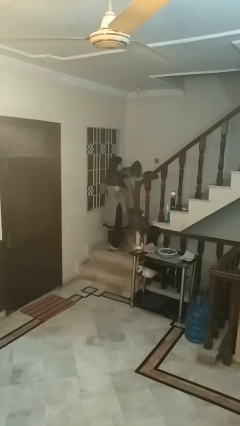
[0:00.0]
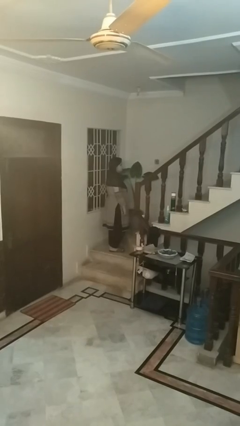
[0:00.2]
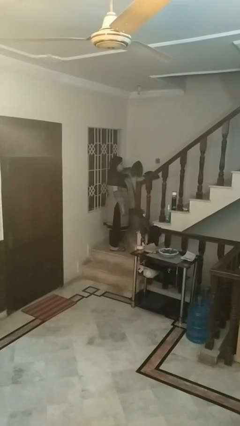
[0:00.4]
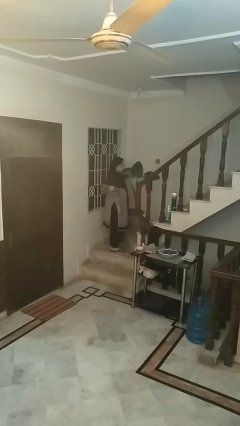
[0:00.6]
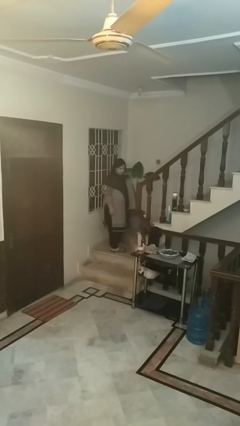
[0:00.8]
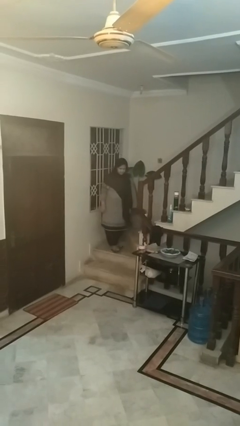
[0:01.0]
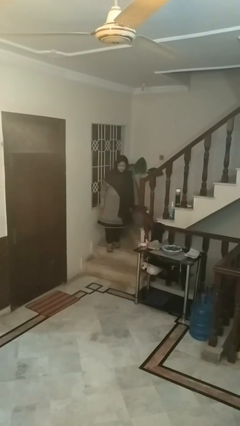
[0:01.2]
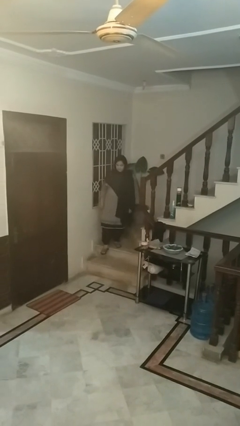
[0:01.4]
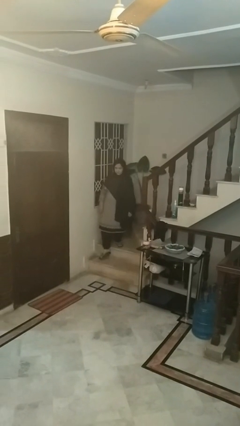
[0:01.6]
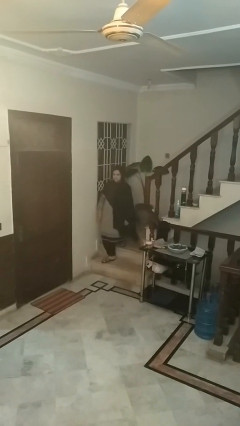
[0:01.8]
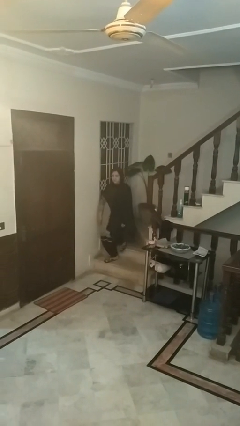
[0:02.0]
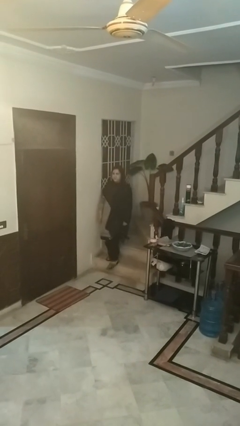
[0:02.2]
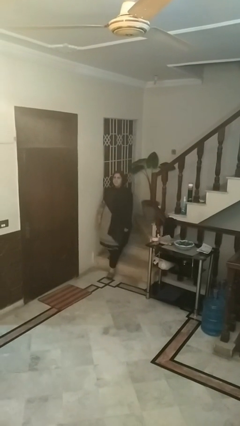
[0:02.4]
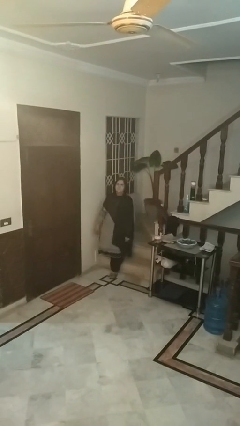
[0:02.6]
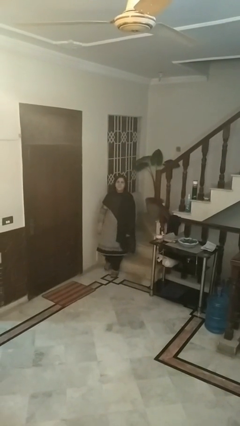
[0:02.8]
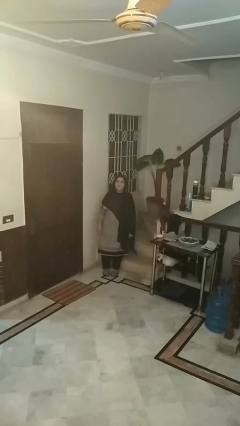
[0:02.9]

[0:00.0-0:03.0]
person climbs down stairs

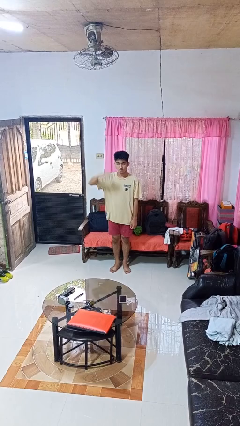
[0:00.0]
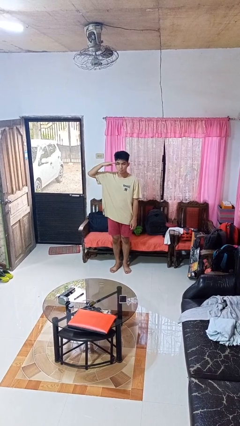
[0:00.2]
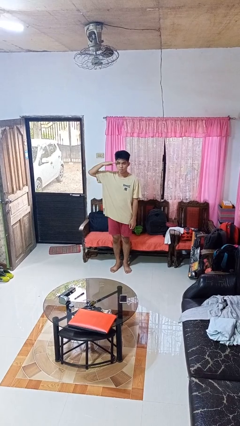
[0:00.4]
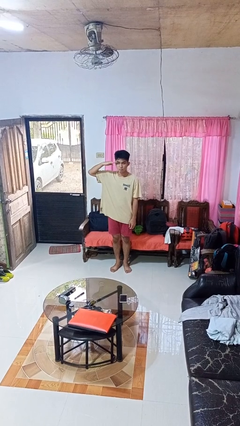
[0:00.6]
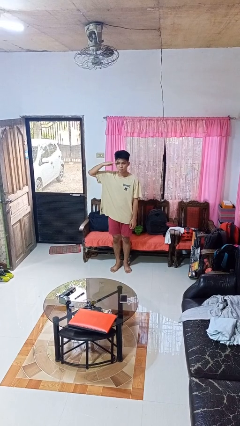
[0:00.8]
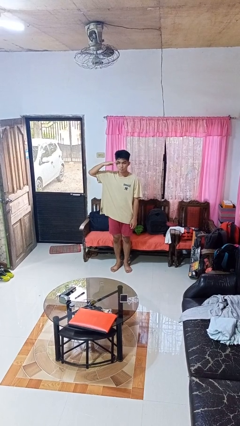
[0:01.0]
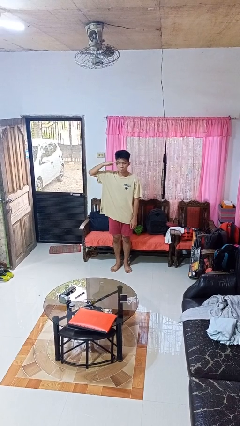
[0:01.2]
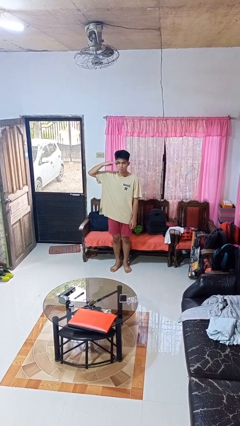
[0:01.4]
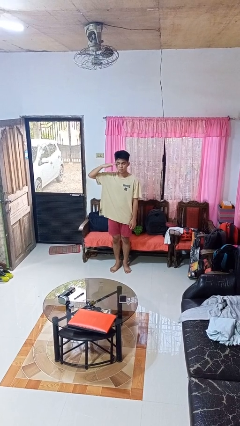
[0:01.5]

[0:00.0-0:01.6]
person salutes

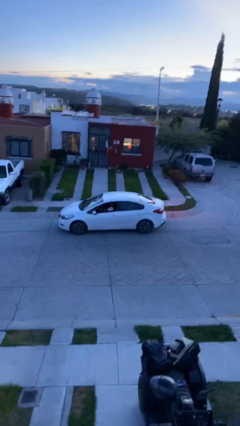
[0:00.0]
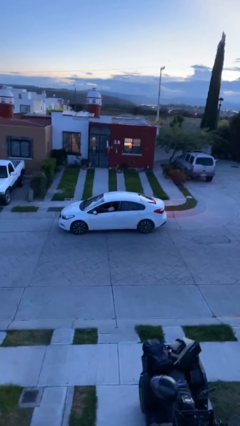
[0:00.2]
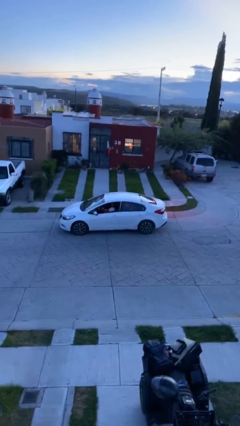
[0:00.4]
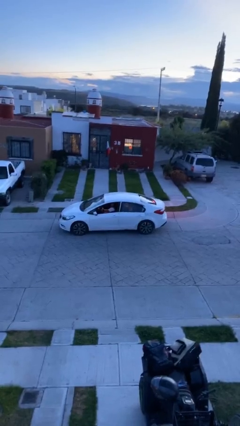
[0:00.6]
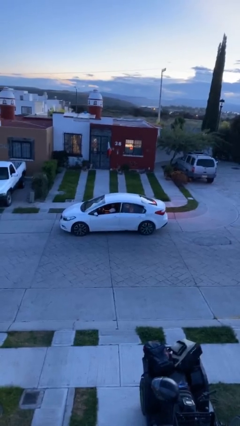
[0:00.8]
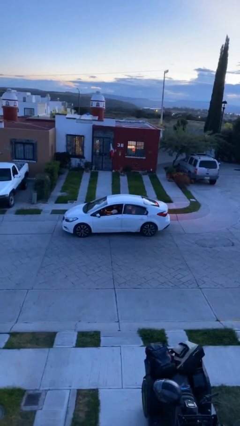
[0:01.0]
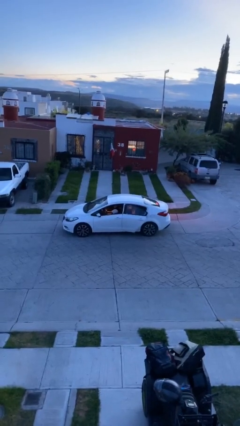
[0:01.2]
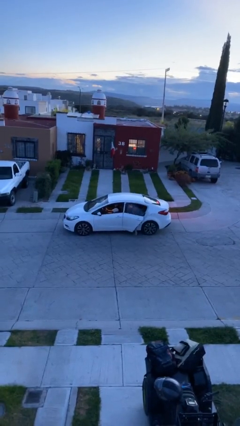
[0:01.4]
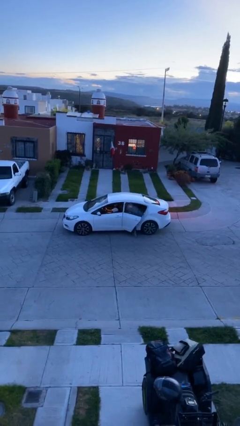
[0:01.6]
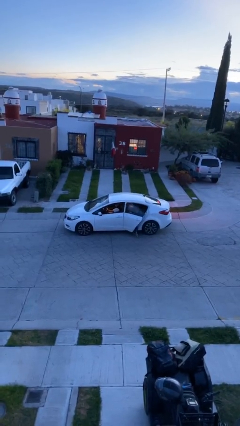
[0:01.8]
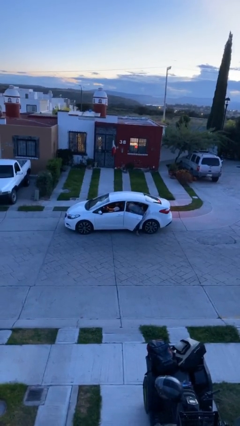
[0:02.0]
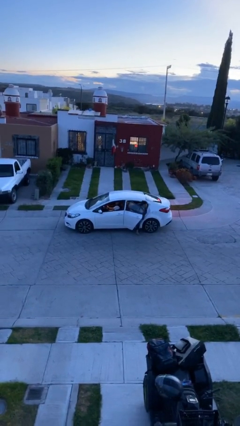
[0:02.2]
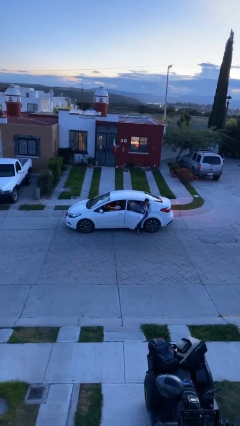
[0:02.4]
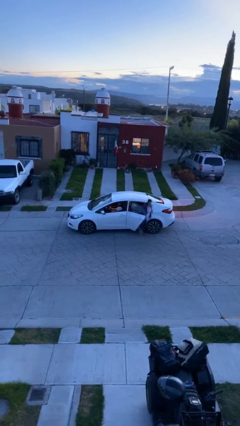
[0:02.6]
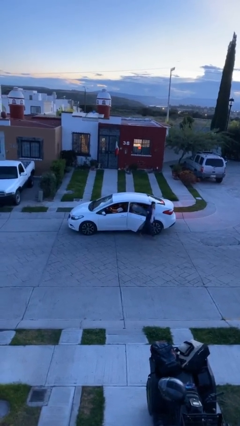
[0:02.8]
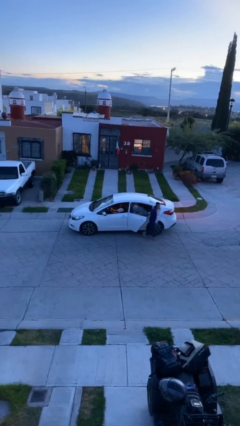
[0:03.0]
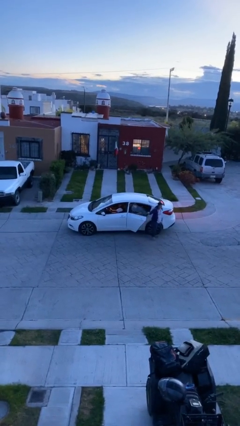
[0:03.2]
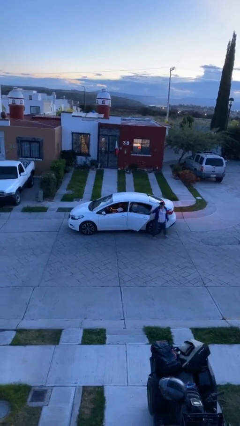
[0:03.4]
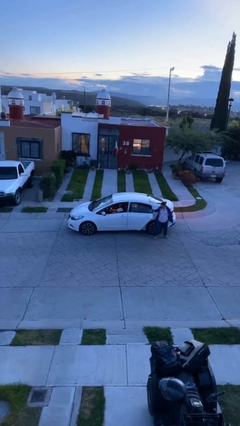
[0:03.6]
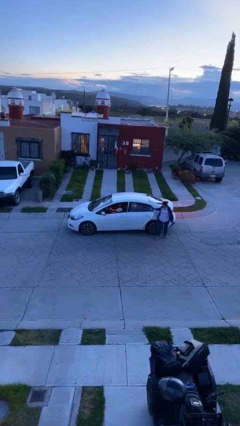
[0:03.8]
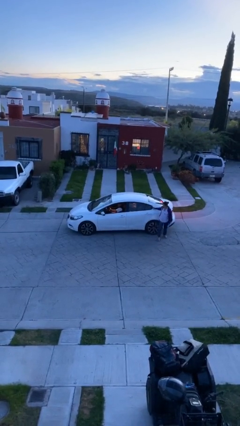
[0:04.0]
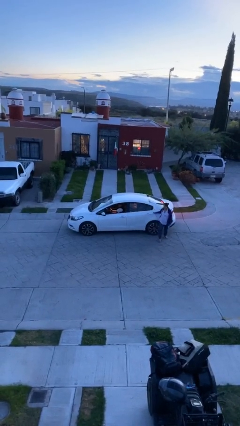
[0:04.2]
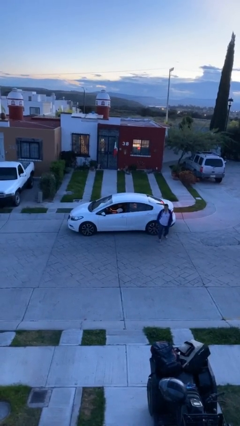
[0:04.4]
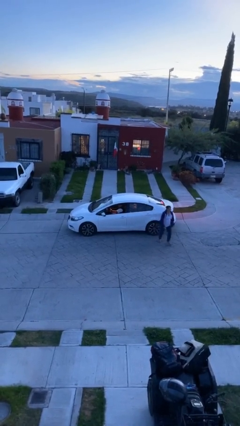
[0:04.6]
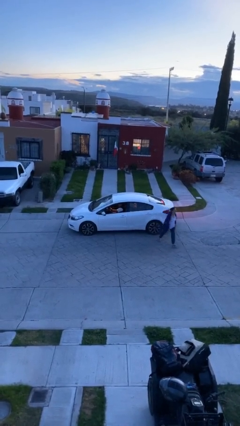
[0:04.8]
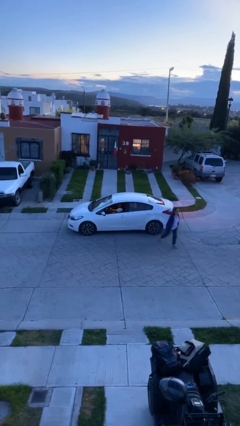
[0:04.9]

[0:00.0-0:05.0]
car drops off person

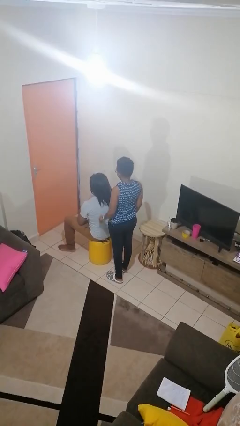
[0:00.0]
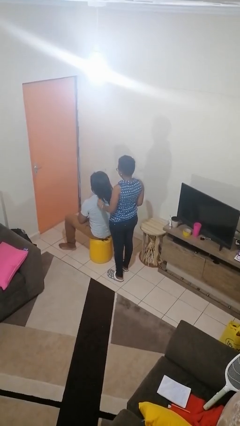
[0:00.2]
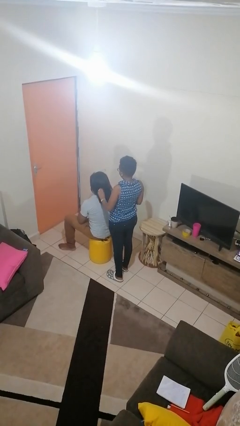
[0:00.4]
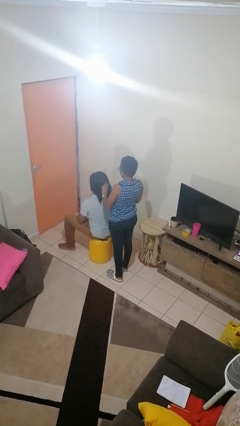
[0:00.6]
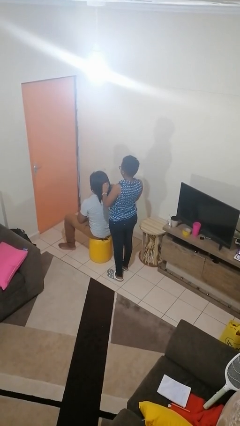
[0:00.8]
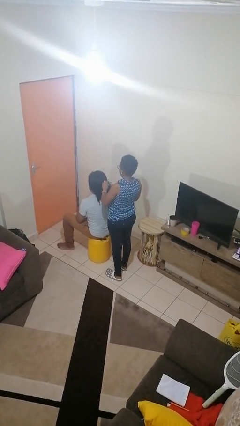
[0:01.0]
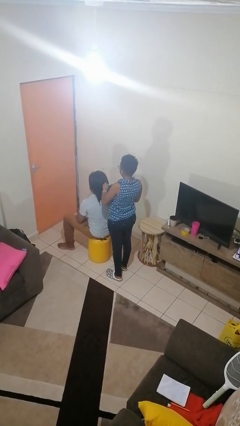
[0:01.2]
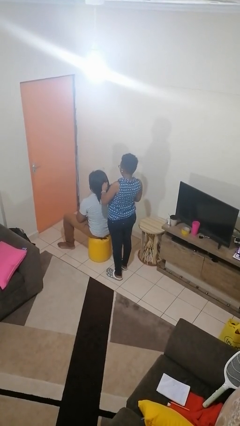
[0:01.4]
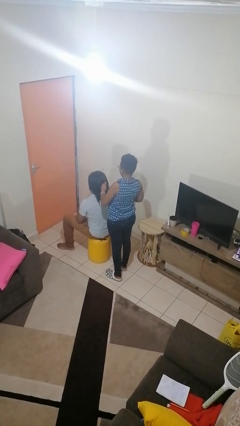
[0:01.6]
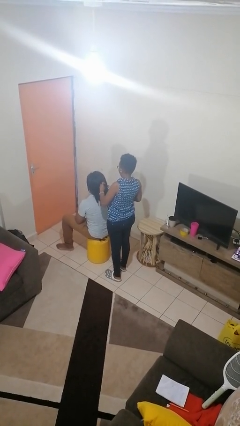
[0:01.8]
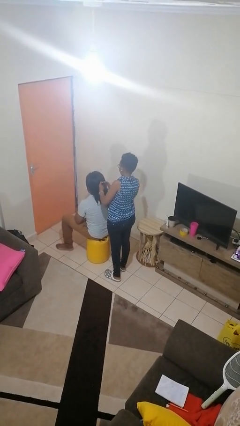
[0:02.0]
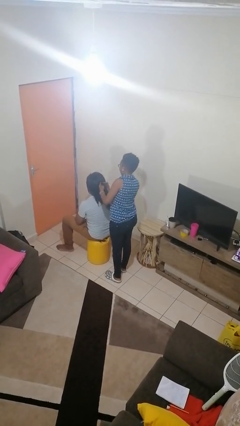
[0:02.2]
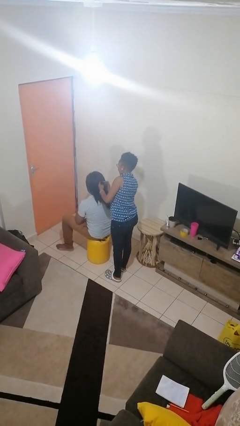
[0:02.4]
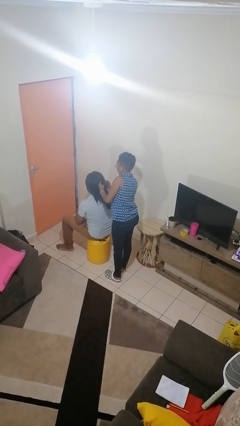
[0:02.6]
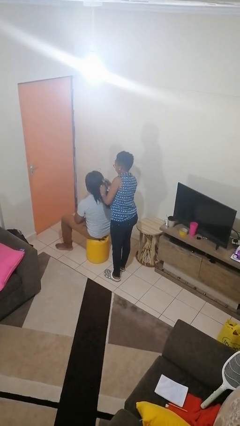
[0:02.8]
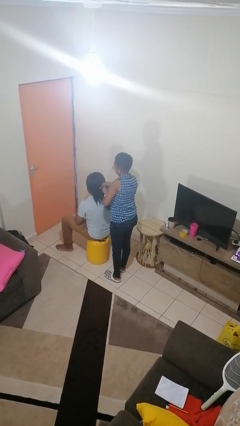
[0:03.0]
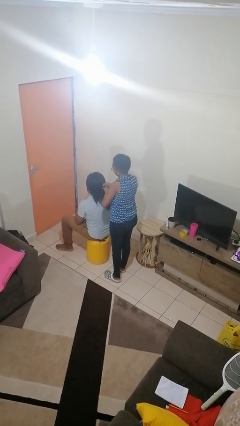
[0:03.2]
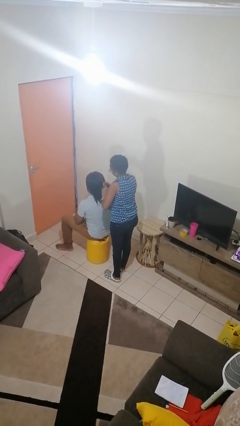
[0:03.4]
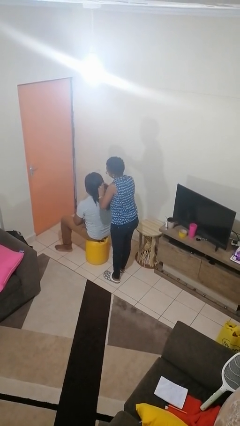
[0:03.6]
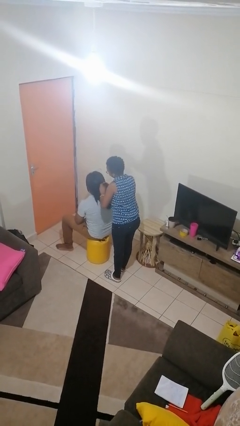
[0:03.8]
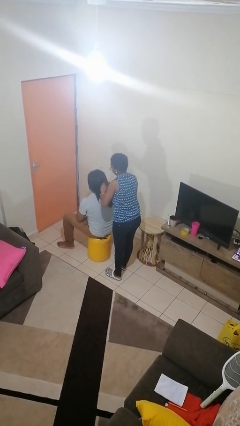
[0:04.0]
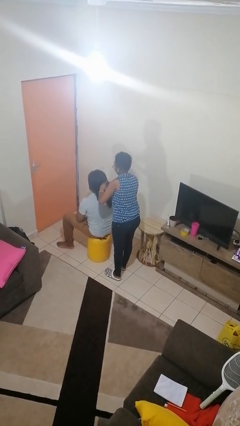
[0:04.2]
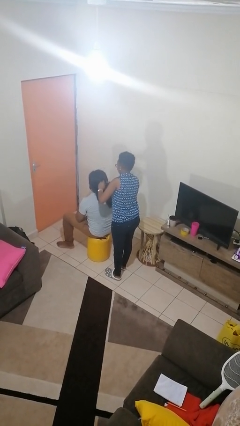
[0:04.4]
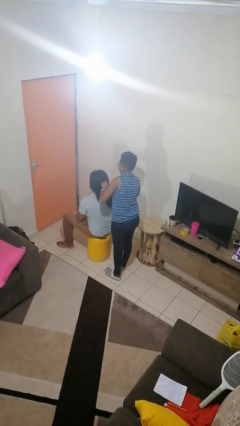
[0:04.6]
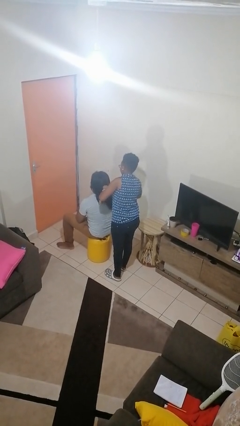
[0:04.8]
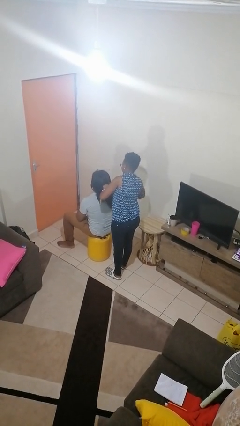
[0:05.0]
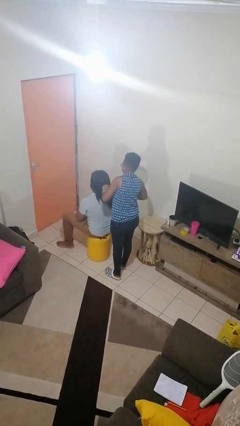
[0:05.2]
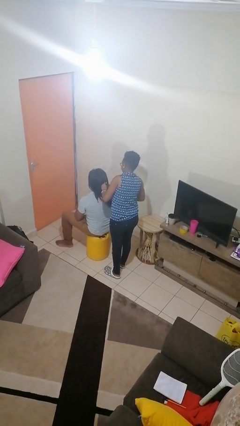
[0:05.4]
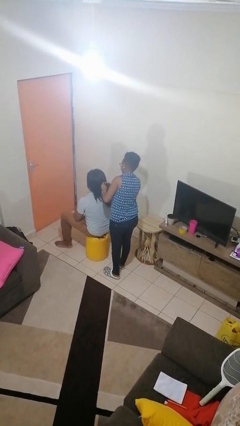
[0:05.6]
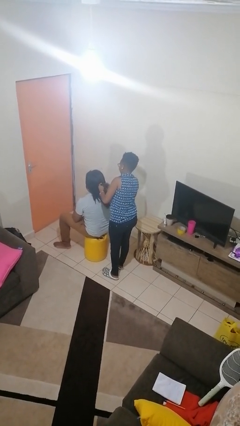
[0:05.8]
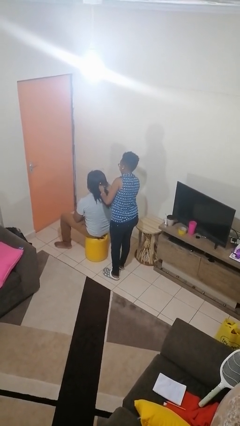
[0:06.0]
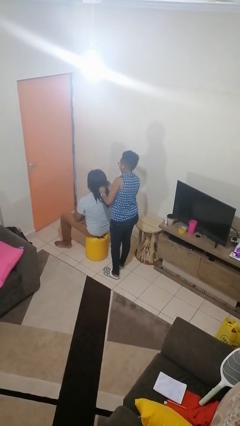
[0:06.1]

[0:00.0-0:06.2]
person braids hair of person

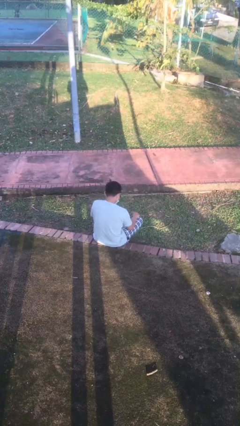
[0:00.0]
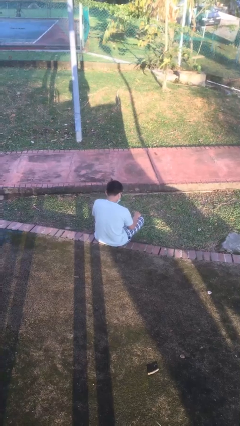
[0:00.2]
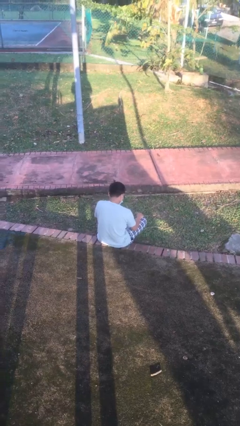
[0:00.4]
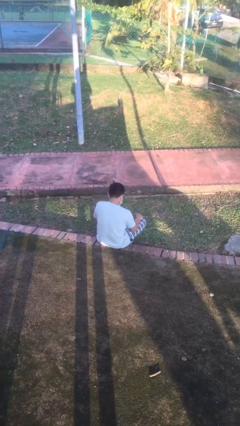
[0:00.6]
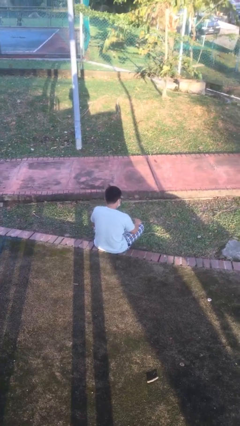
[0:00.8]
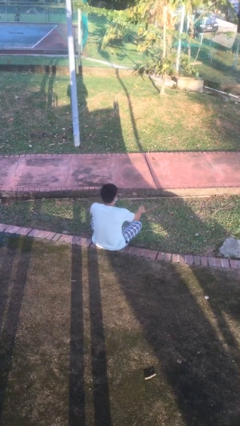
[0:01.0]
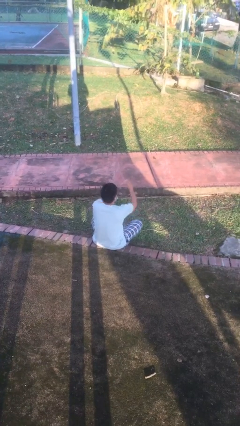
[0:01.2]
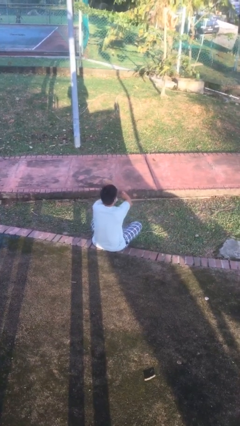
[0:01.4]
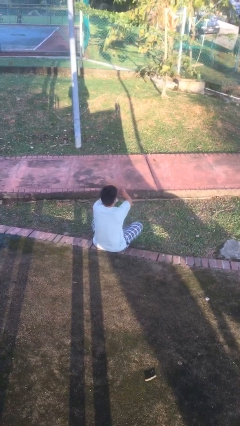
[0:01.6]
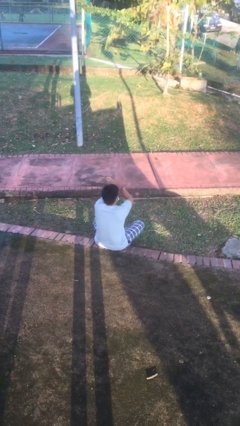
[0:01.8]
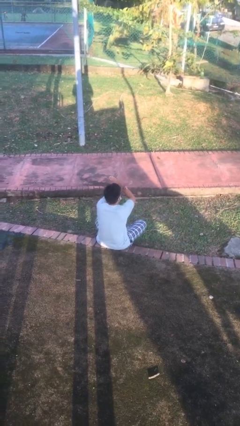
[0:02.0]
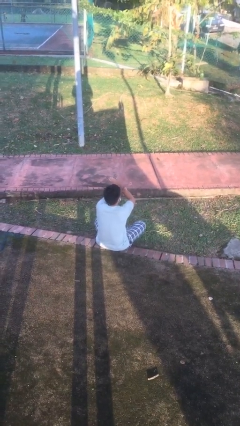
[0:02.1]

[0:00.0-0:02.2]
person gestures arms x
